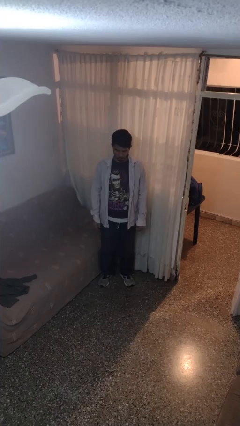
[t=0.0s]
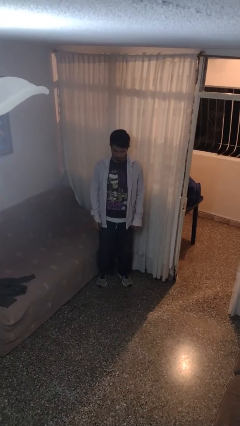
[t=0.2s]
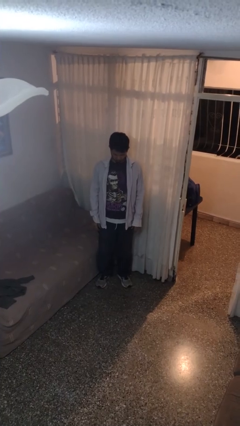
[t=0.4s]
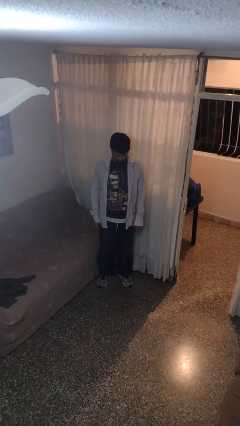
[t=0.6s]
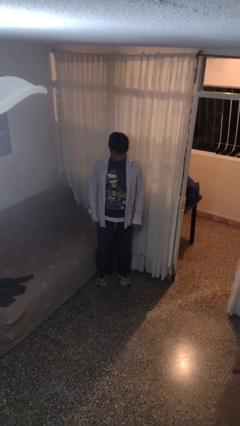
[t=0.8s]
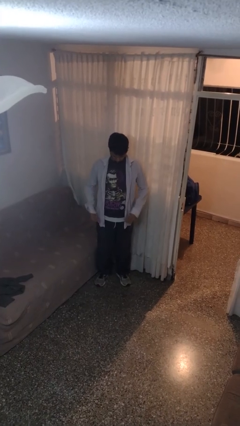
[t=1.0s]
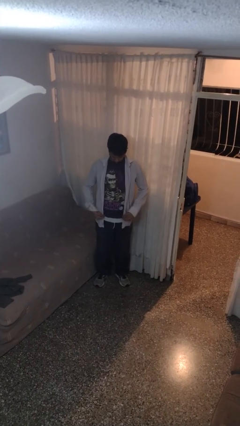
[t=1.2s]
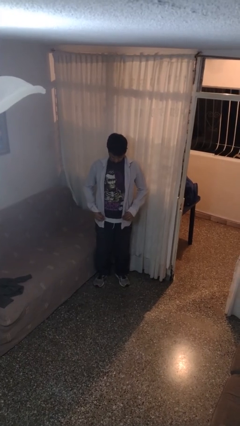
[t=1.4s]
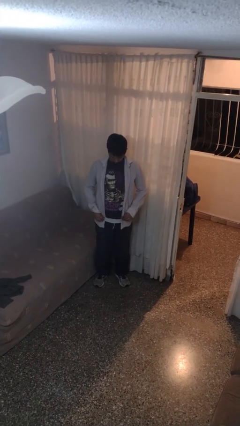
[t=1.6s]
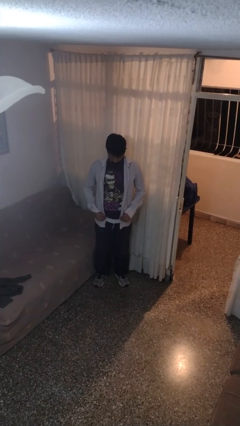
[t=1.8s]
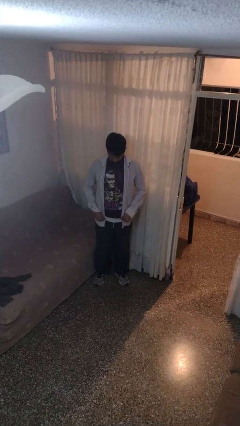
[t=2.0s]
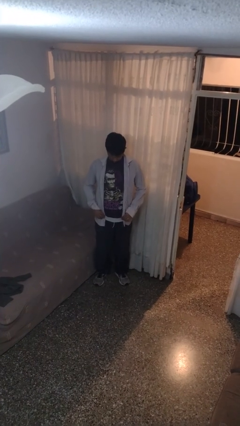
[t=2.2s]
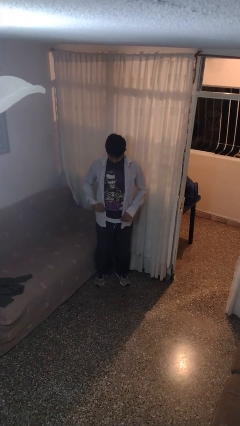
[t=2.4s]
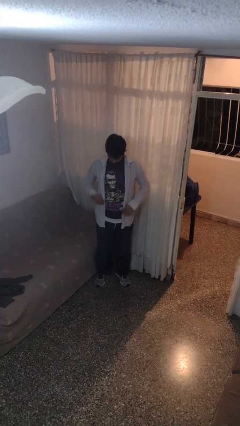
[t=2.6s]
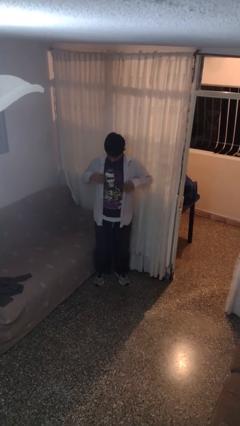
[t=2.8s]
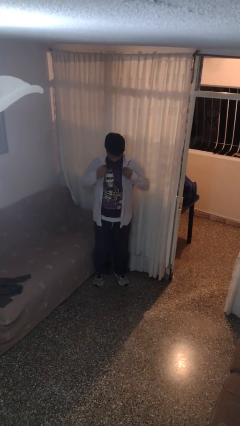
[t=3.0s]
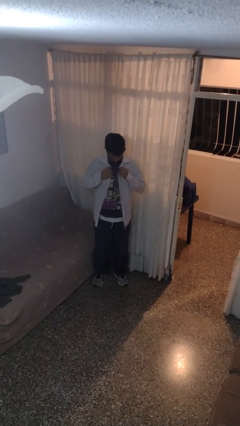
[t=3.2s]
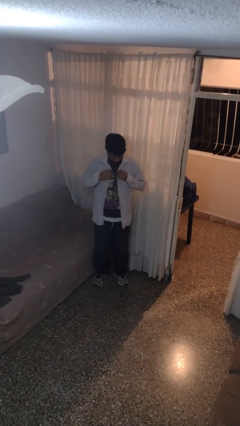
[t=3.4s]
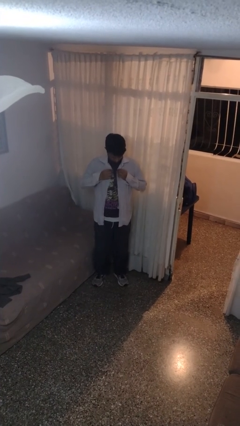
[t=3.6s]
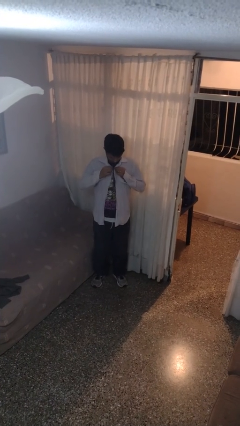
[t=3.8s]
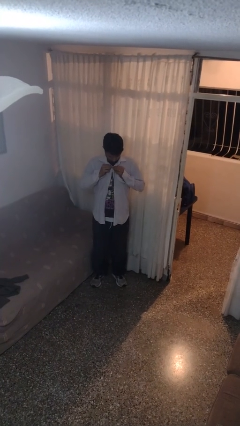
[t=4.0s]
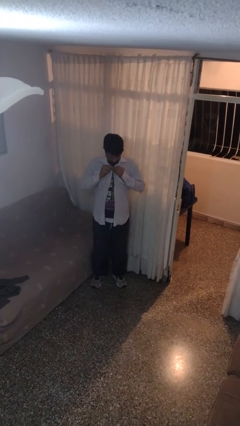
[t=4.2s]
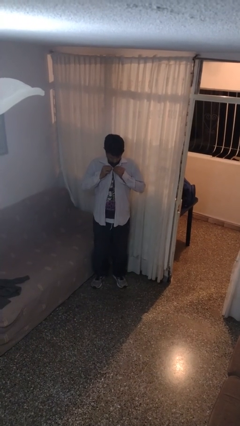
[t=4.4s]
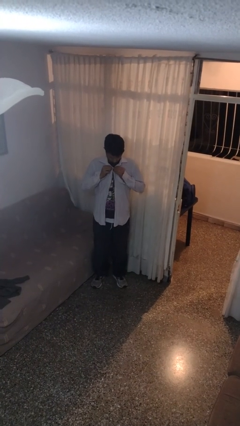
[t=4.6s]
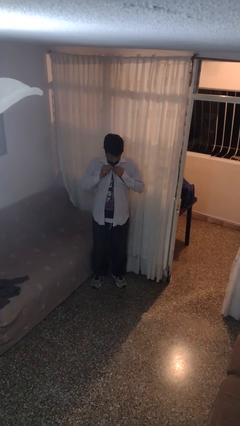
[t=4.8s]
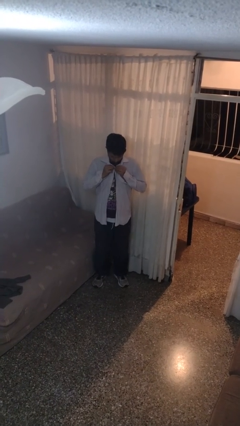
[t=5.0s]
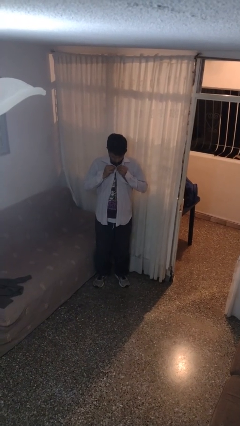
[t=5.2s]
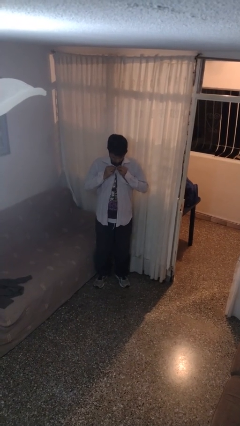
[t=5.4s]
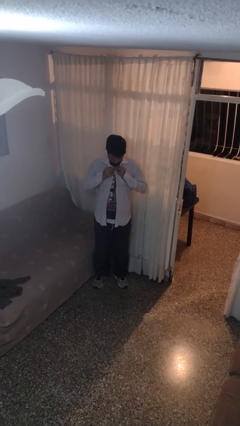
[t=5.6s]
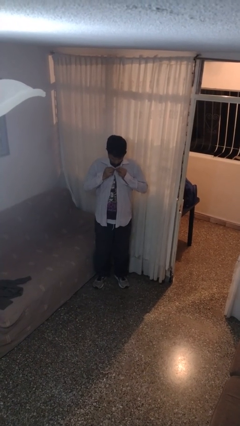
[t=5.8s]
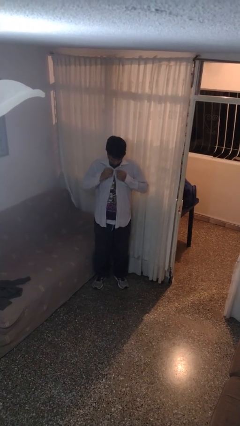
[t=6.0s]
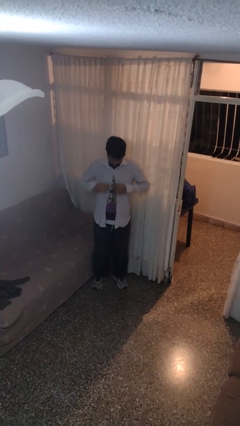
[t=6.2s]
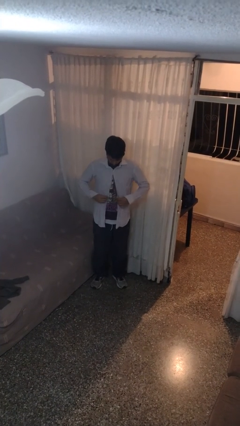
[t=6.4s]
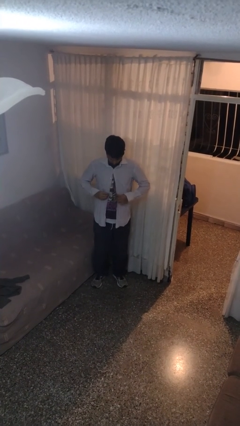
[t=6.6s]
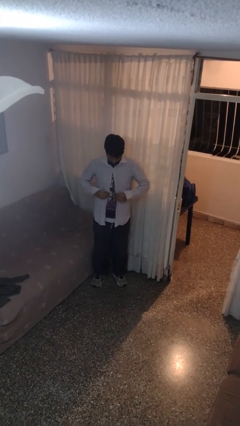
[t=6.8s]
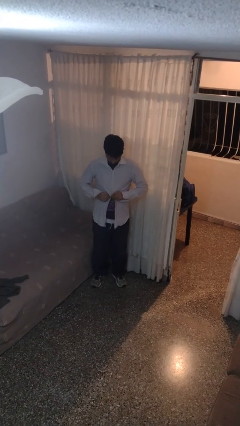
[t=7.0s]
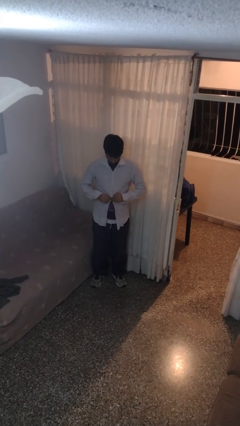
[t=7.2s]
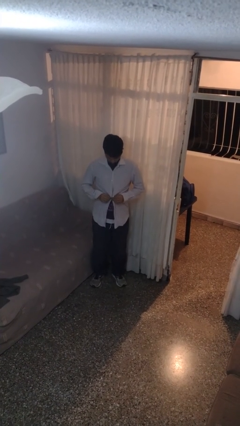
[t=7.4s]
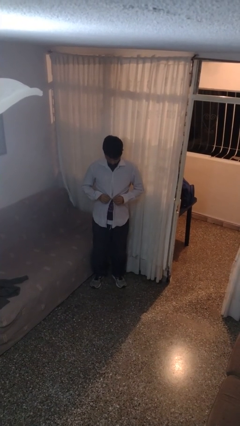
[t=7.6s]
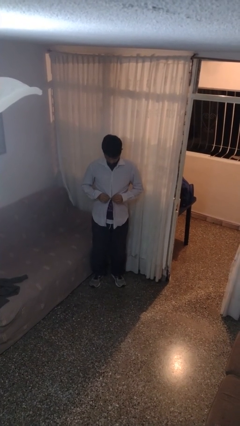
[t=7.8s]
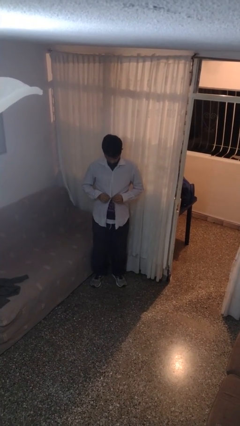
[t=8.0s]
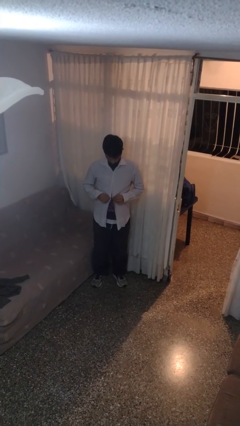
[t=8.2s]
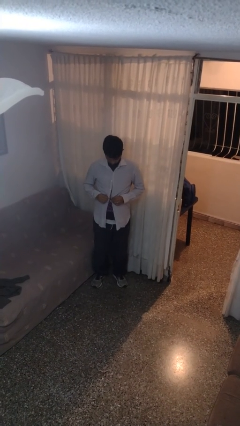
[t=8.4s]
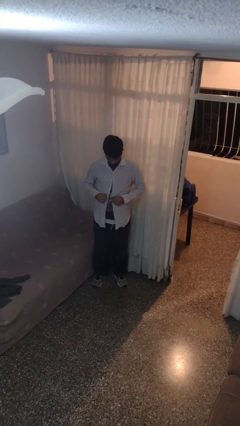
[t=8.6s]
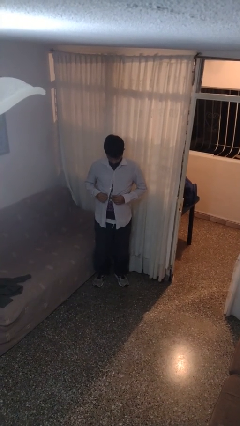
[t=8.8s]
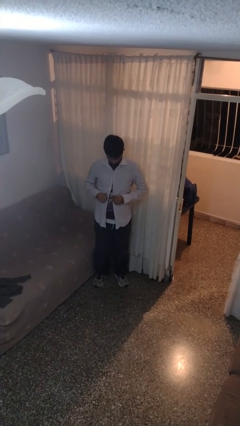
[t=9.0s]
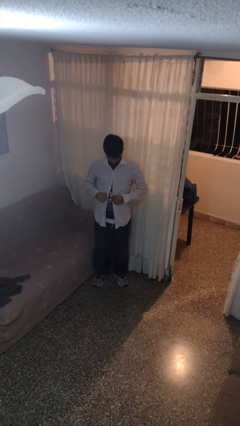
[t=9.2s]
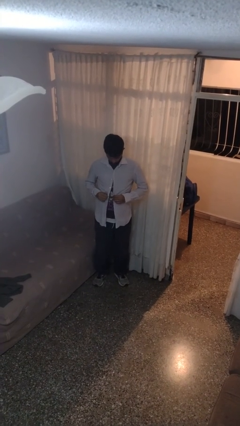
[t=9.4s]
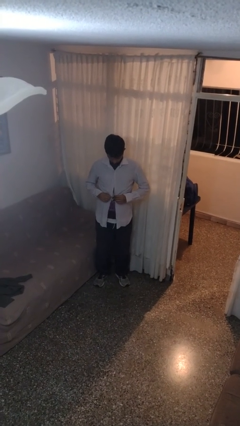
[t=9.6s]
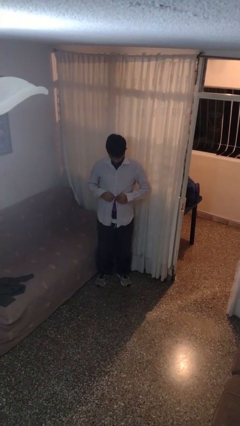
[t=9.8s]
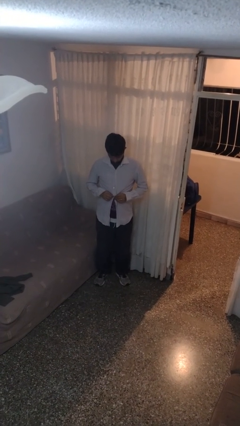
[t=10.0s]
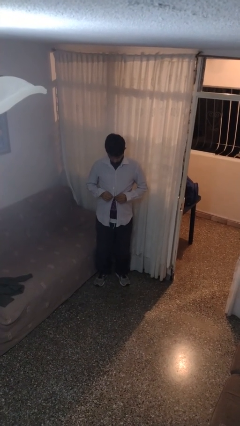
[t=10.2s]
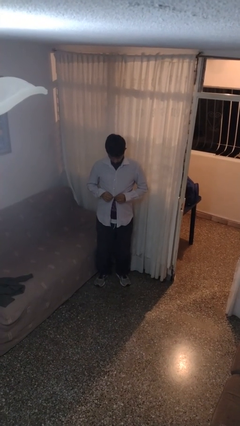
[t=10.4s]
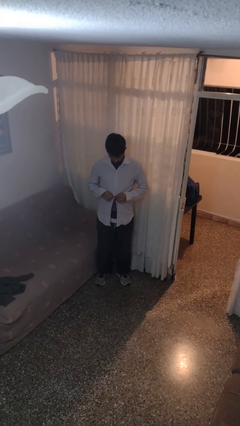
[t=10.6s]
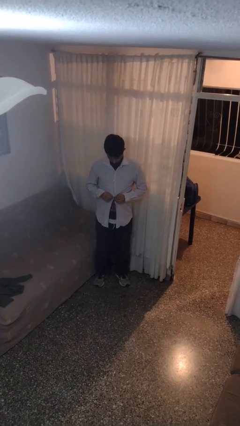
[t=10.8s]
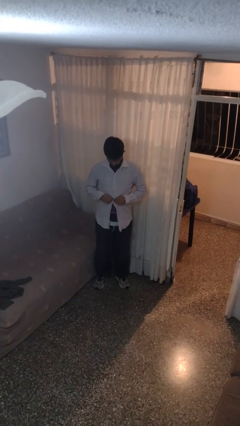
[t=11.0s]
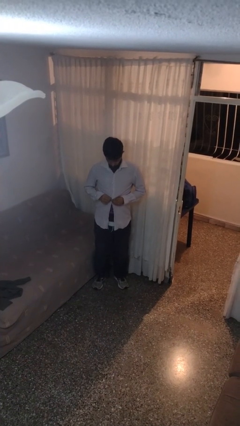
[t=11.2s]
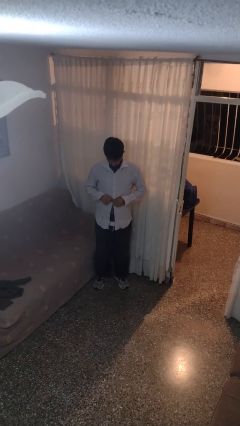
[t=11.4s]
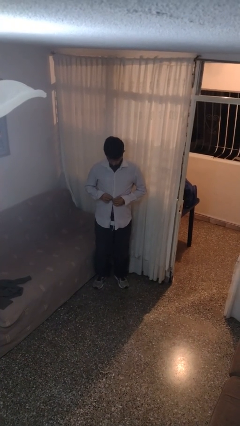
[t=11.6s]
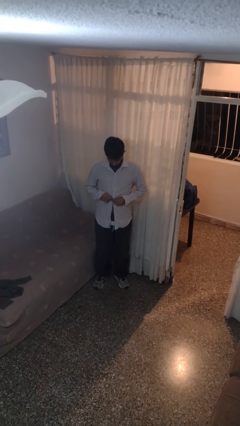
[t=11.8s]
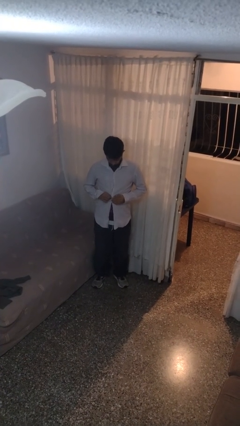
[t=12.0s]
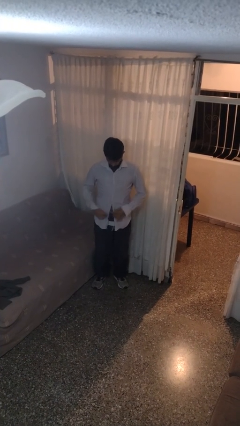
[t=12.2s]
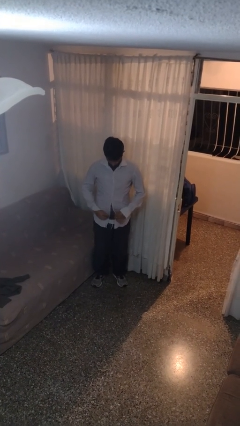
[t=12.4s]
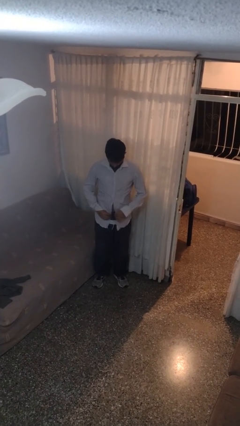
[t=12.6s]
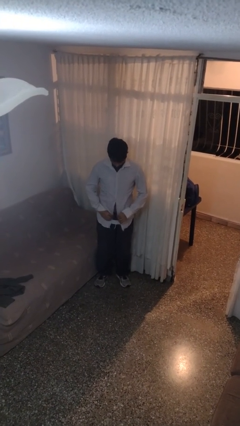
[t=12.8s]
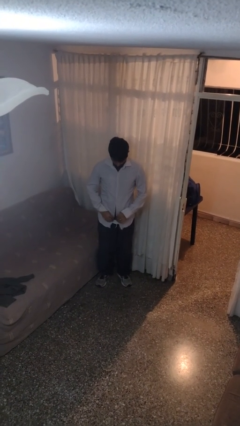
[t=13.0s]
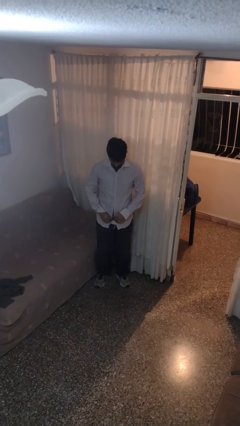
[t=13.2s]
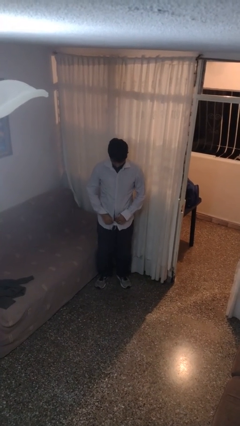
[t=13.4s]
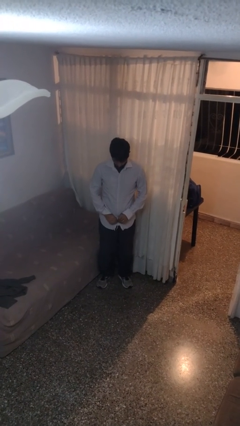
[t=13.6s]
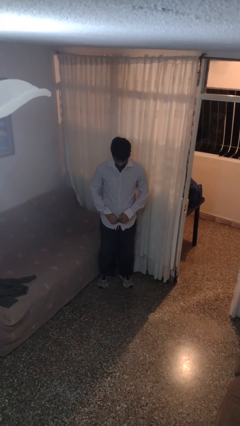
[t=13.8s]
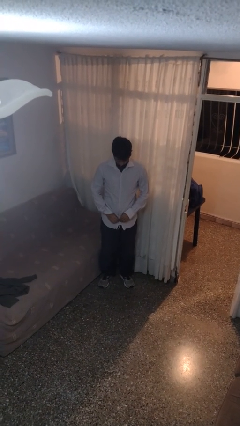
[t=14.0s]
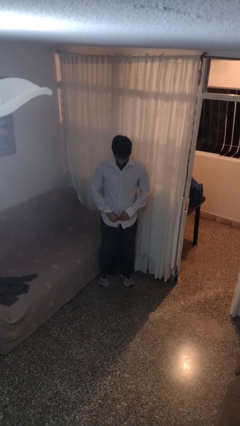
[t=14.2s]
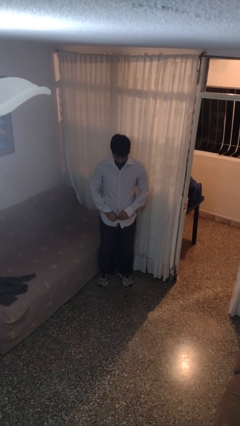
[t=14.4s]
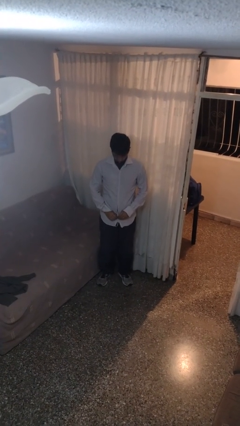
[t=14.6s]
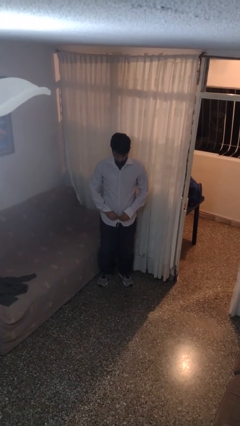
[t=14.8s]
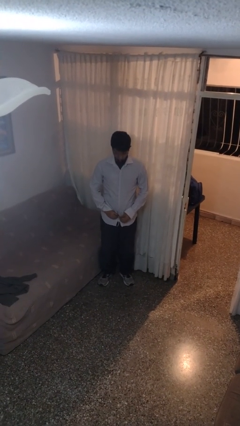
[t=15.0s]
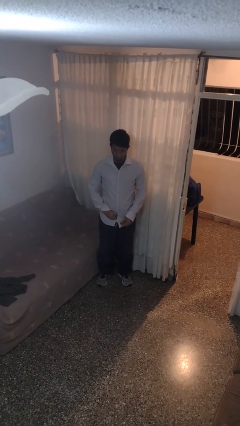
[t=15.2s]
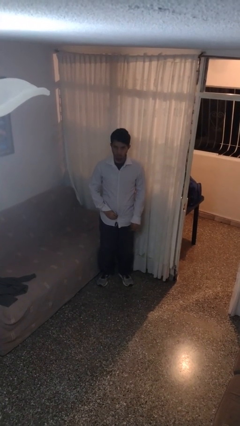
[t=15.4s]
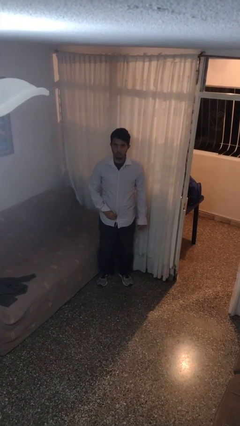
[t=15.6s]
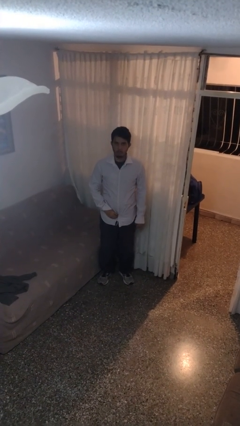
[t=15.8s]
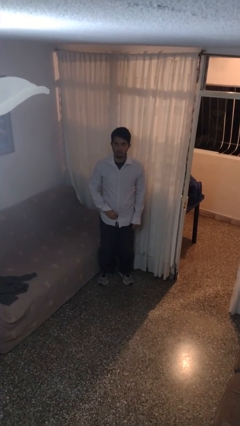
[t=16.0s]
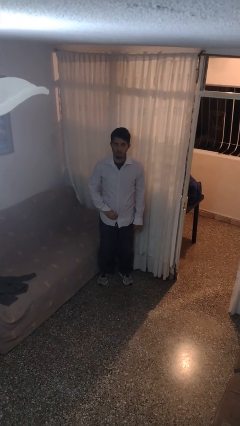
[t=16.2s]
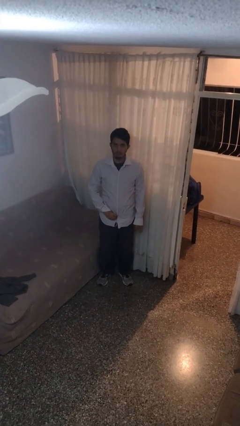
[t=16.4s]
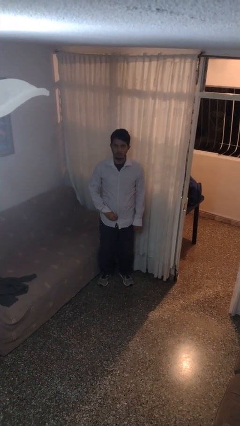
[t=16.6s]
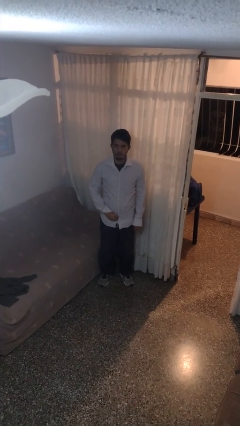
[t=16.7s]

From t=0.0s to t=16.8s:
person buttons shirt

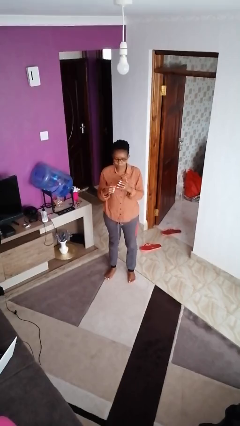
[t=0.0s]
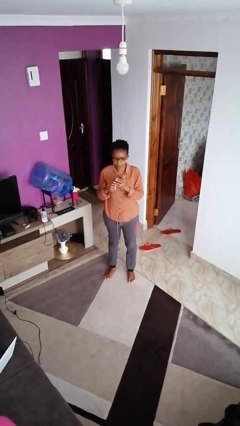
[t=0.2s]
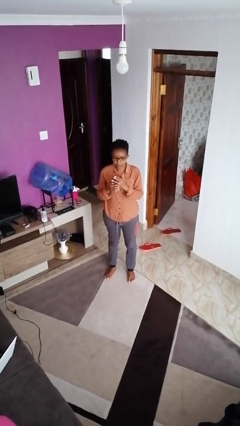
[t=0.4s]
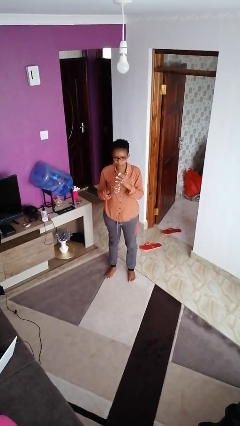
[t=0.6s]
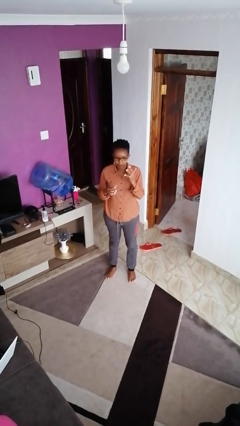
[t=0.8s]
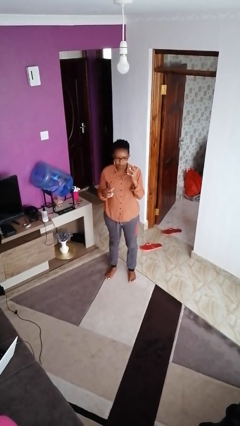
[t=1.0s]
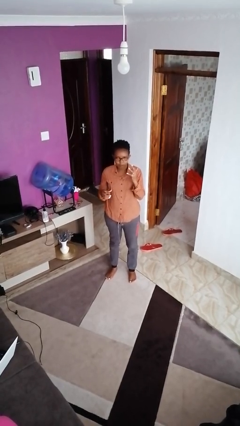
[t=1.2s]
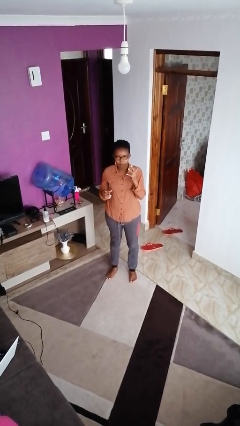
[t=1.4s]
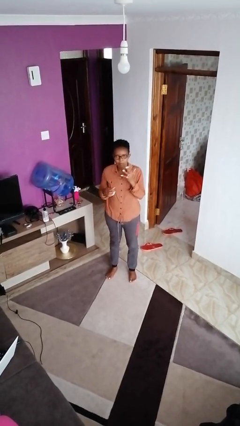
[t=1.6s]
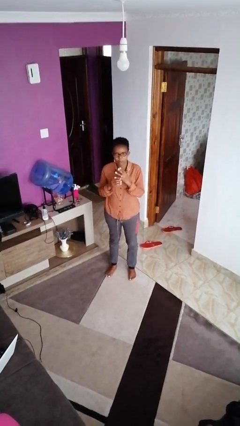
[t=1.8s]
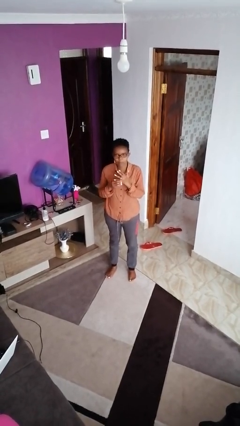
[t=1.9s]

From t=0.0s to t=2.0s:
person puts on ring
